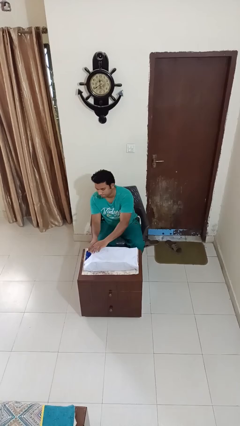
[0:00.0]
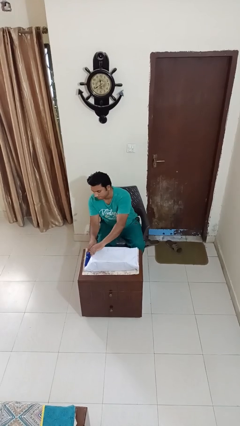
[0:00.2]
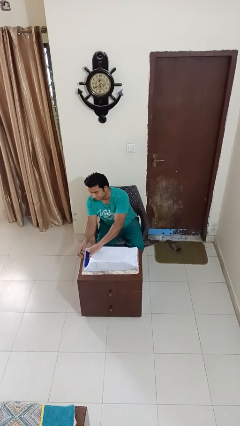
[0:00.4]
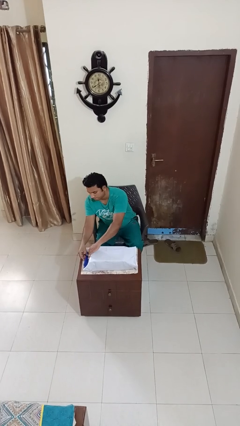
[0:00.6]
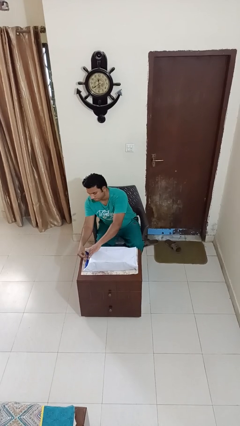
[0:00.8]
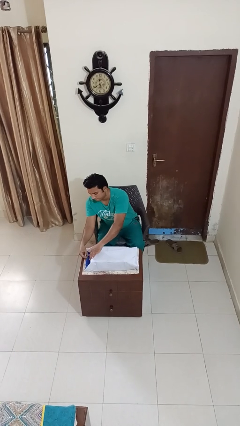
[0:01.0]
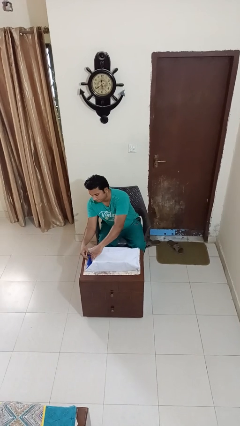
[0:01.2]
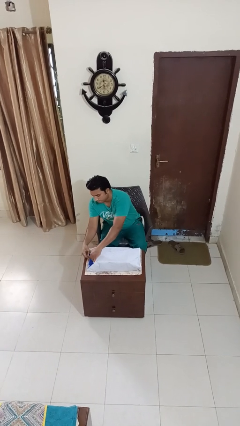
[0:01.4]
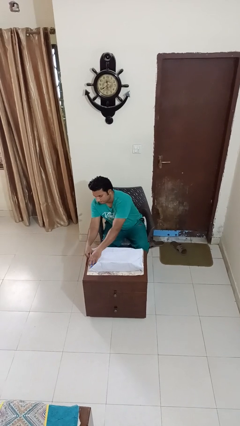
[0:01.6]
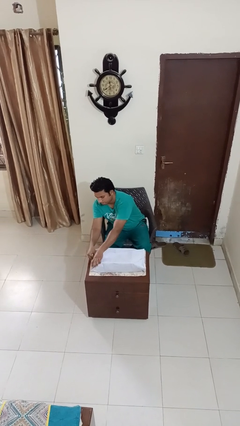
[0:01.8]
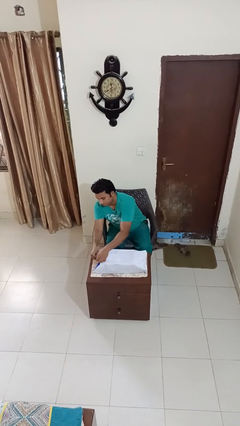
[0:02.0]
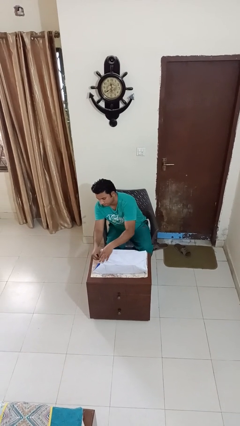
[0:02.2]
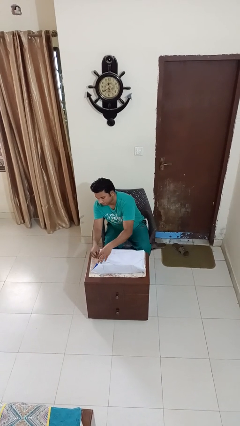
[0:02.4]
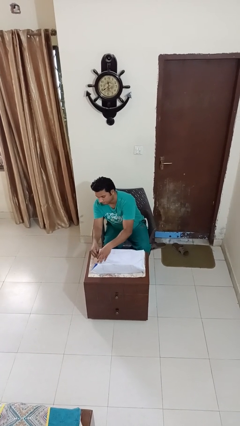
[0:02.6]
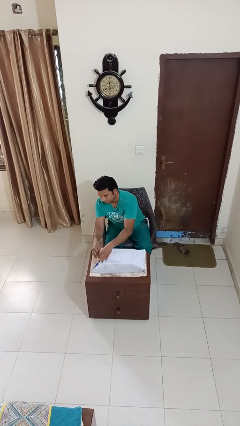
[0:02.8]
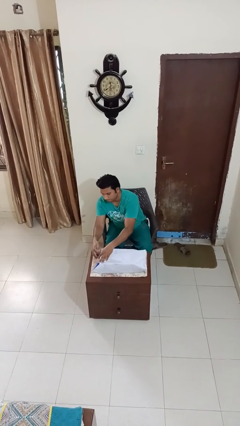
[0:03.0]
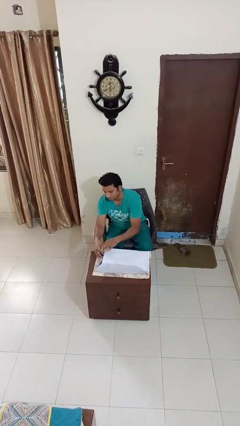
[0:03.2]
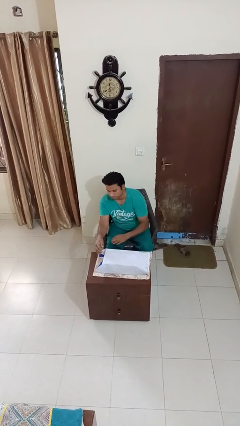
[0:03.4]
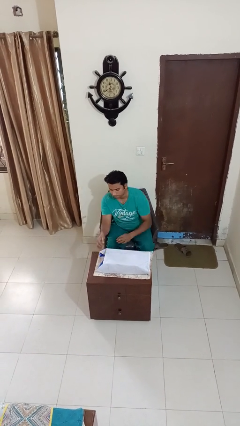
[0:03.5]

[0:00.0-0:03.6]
person wraps box

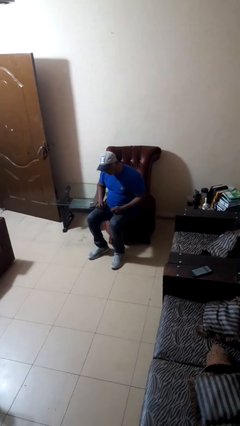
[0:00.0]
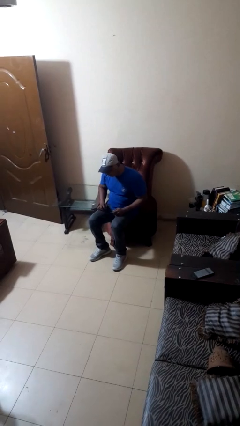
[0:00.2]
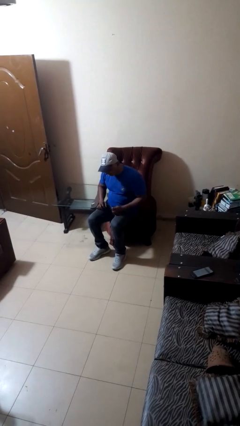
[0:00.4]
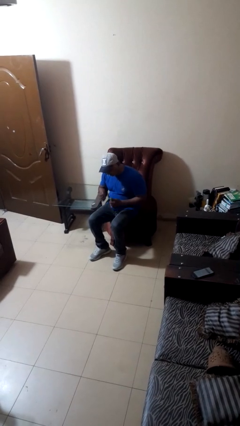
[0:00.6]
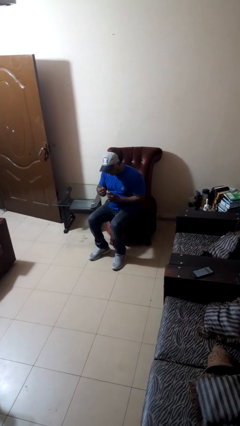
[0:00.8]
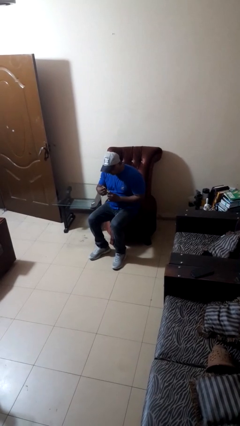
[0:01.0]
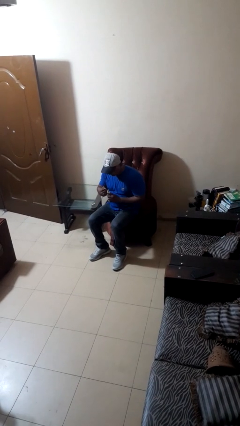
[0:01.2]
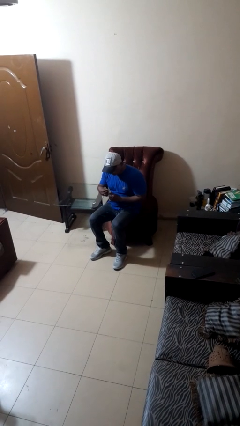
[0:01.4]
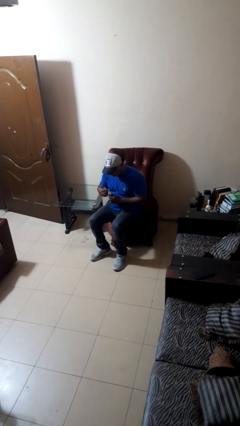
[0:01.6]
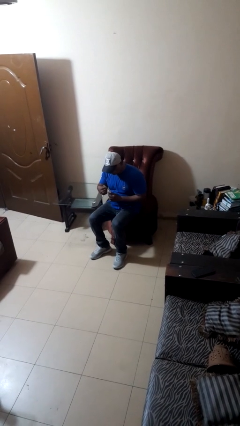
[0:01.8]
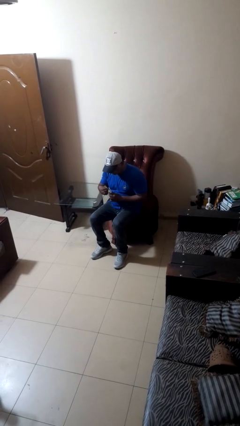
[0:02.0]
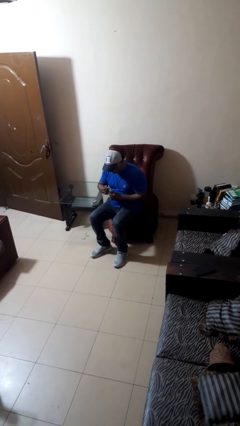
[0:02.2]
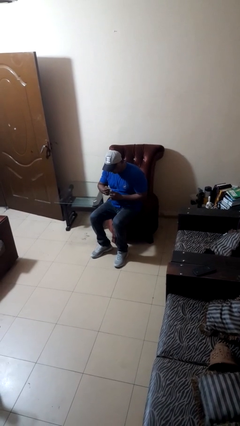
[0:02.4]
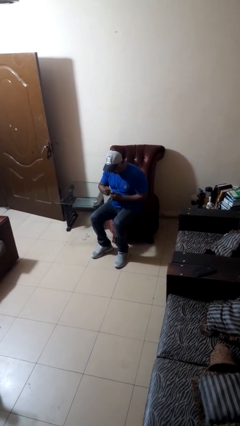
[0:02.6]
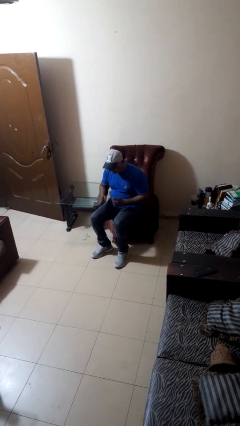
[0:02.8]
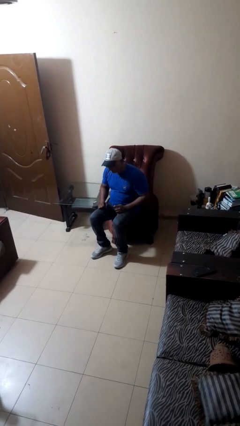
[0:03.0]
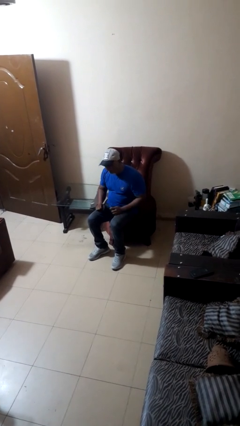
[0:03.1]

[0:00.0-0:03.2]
person files fingernails

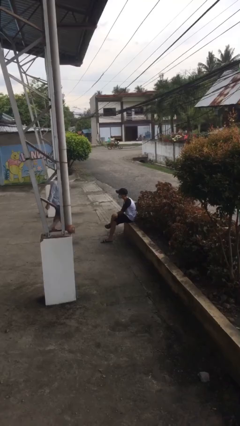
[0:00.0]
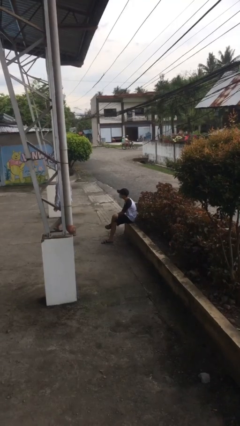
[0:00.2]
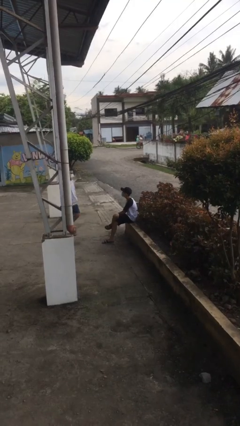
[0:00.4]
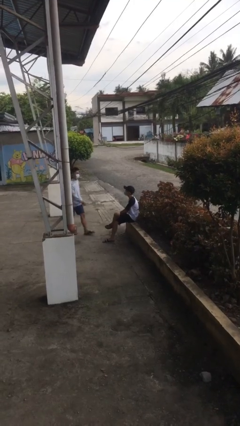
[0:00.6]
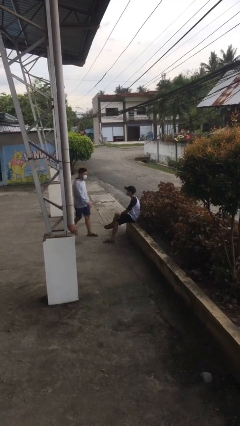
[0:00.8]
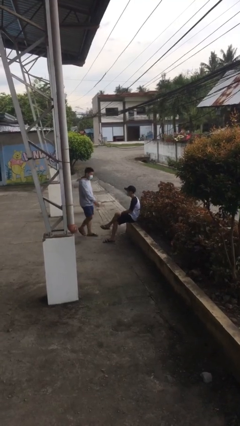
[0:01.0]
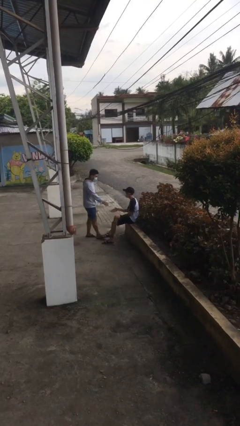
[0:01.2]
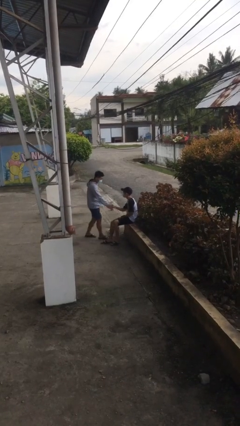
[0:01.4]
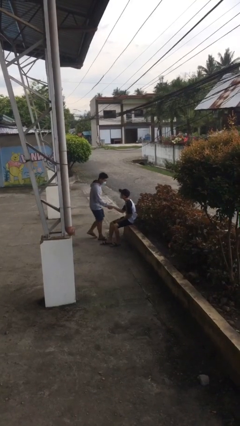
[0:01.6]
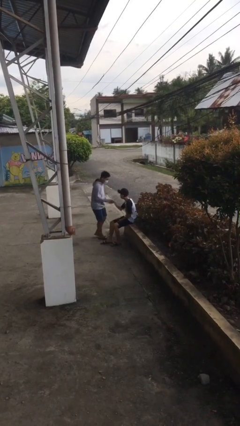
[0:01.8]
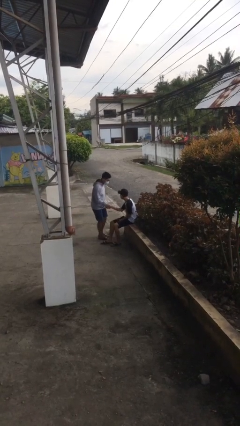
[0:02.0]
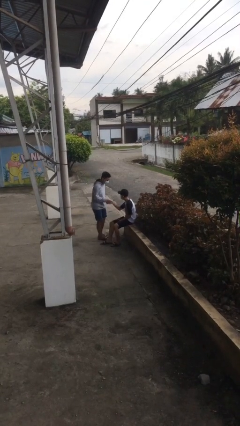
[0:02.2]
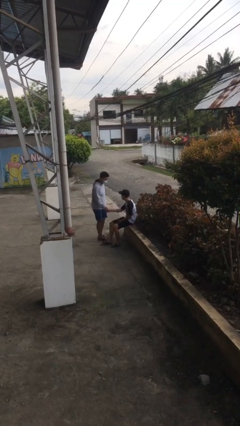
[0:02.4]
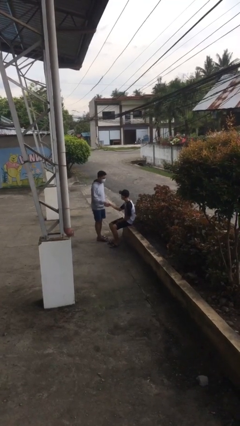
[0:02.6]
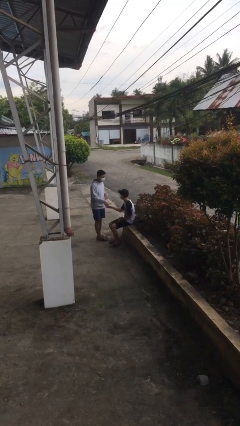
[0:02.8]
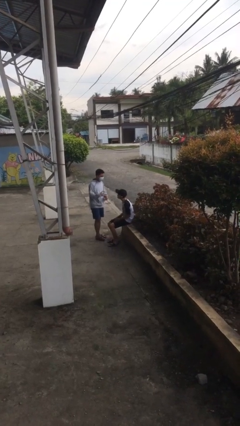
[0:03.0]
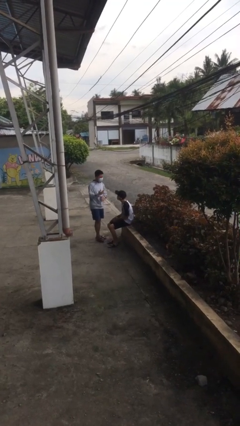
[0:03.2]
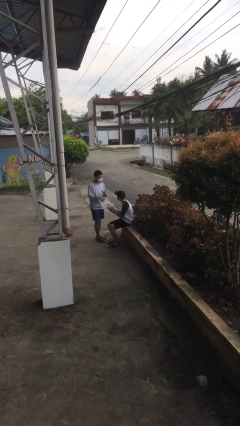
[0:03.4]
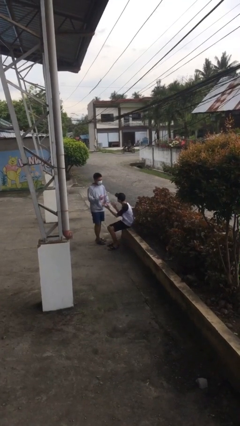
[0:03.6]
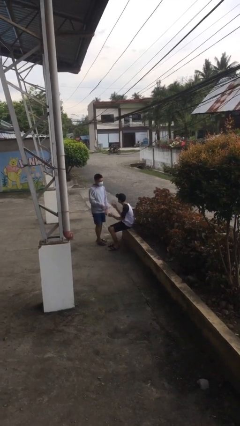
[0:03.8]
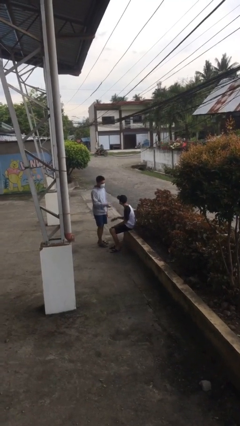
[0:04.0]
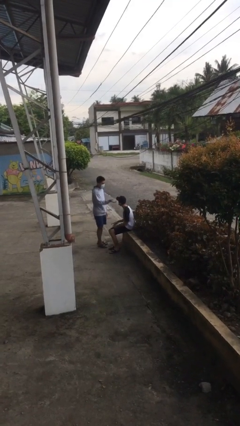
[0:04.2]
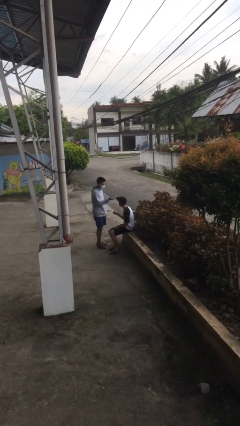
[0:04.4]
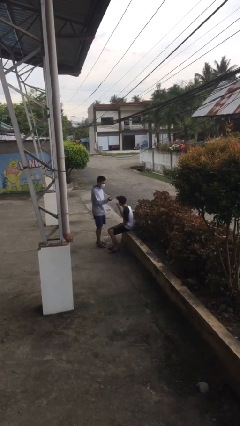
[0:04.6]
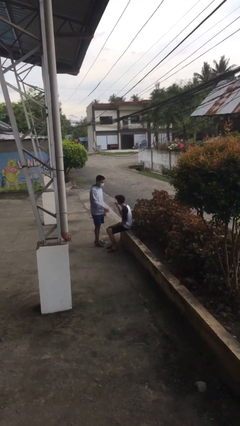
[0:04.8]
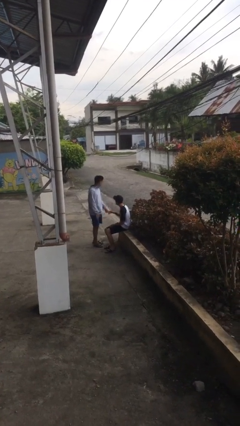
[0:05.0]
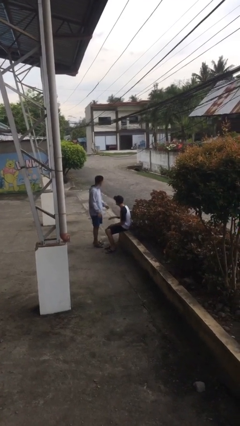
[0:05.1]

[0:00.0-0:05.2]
person shakes hand

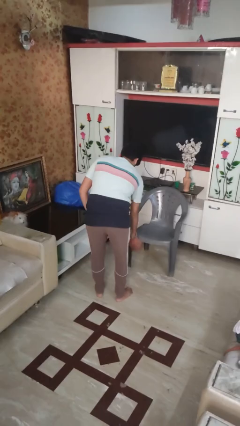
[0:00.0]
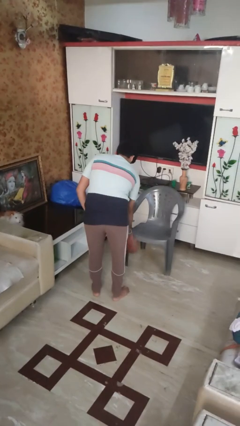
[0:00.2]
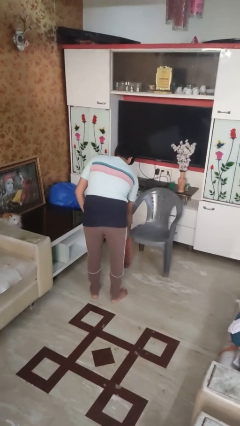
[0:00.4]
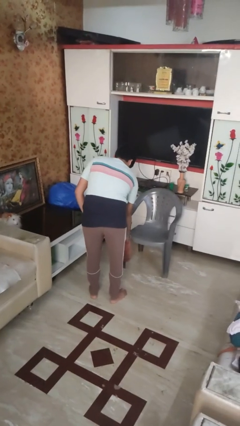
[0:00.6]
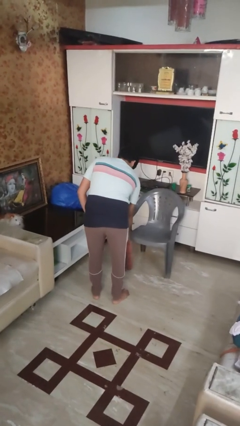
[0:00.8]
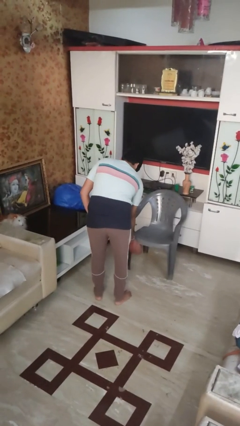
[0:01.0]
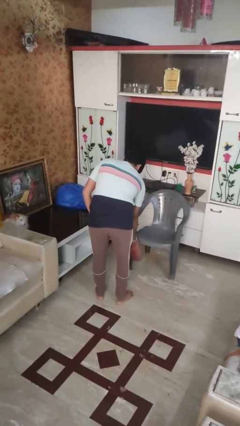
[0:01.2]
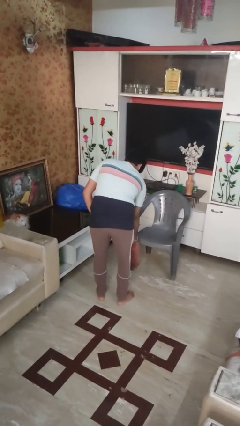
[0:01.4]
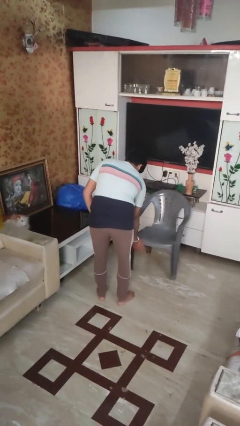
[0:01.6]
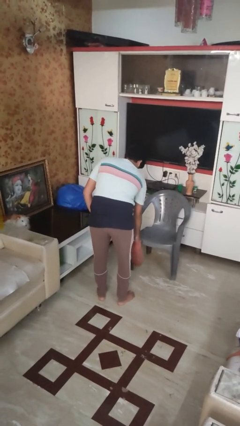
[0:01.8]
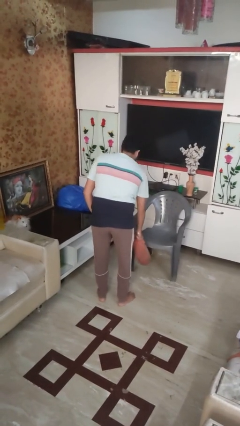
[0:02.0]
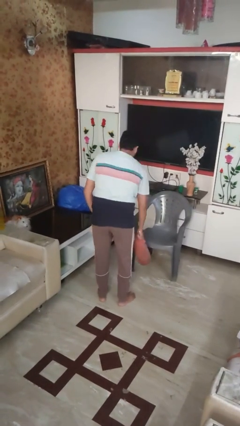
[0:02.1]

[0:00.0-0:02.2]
person dusts furniture

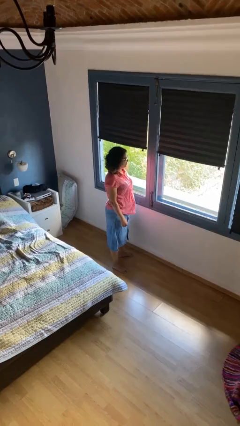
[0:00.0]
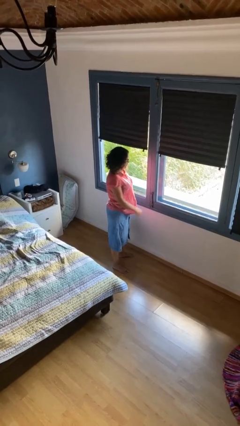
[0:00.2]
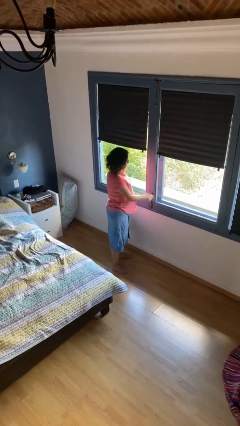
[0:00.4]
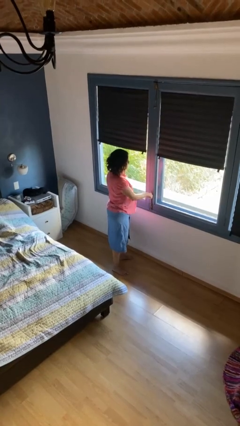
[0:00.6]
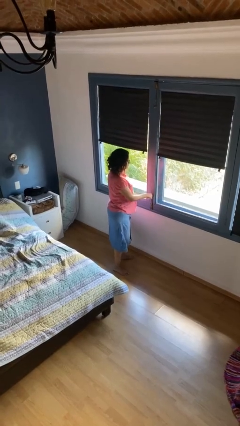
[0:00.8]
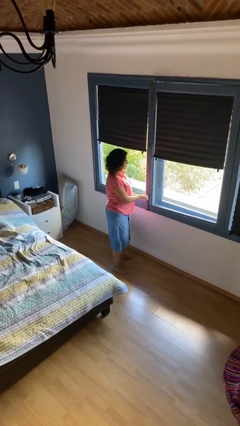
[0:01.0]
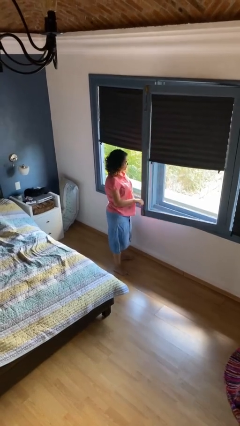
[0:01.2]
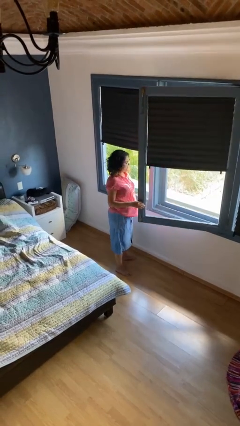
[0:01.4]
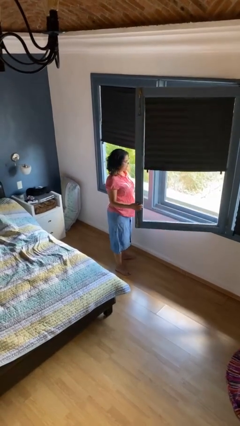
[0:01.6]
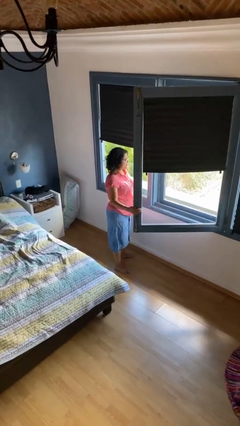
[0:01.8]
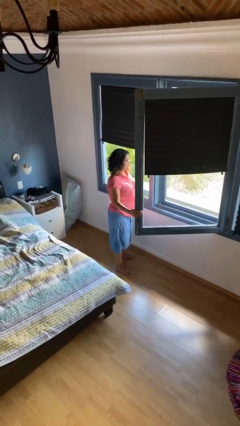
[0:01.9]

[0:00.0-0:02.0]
person opens home window

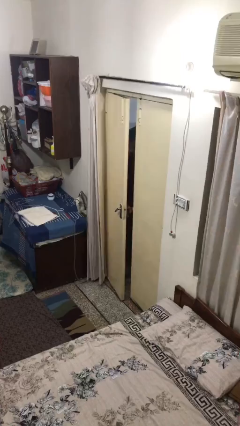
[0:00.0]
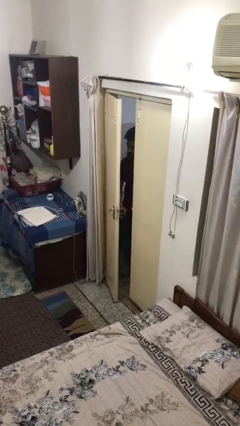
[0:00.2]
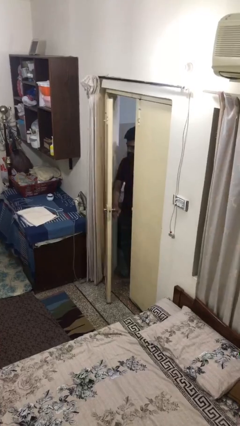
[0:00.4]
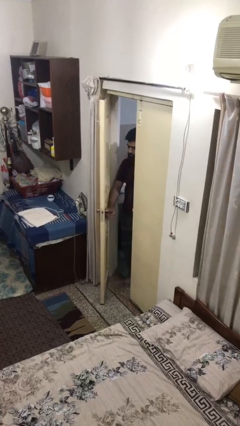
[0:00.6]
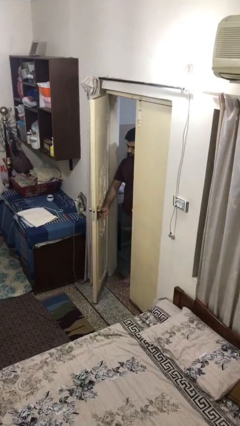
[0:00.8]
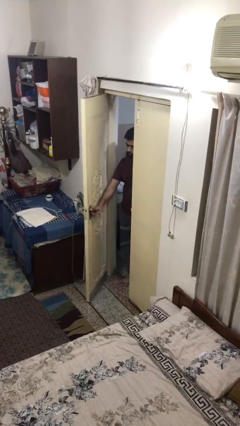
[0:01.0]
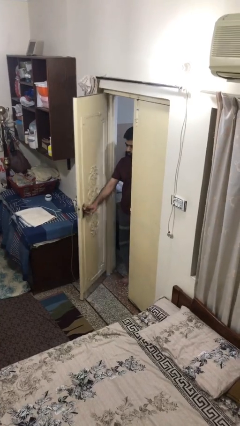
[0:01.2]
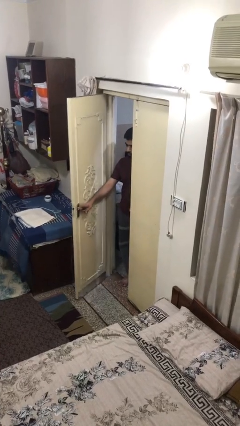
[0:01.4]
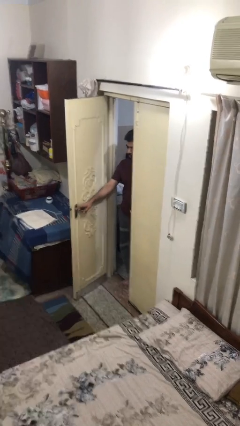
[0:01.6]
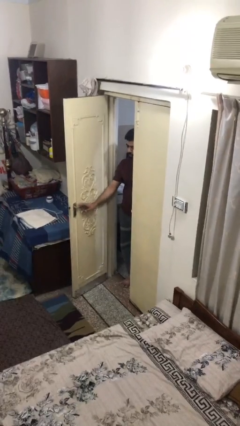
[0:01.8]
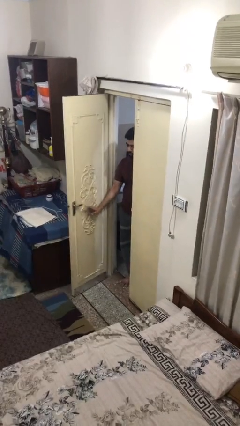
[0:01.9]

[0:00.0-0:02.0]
person opens facility door
